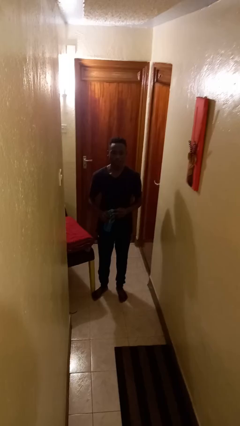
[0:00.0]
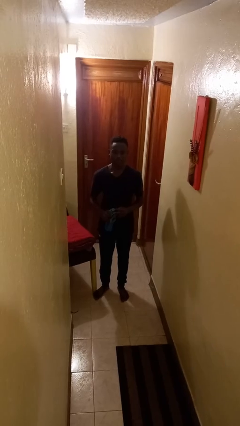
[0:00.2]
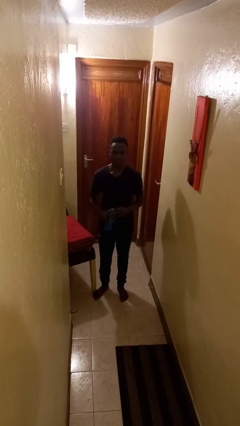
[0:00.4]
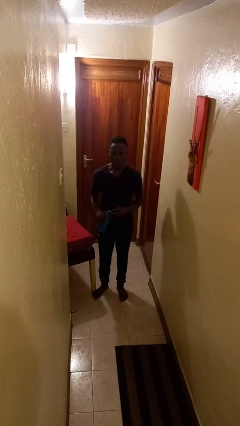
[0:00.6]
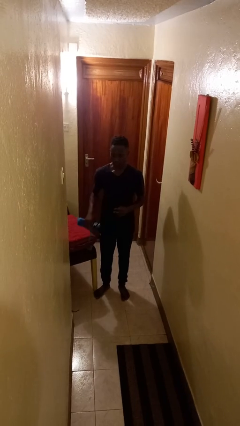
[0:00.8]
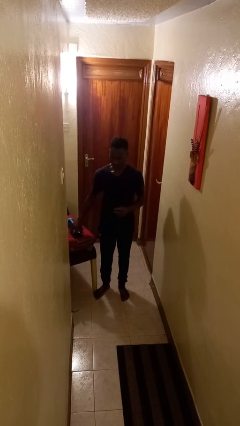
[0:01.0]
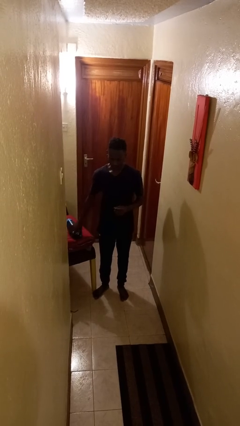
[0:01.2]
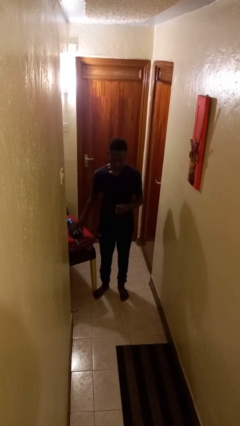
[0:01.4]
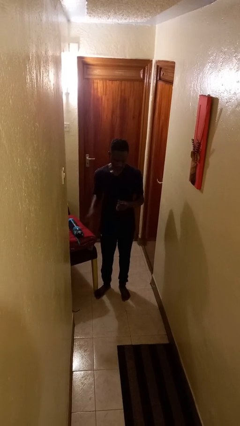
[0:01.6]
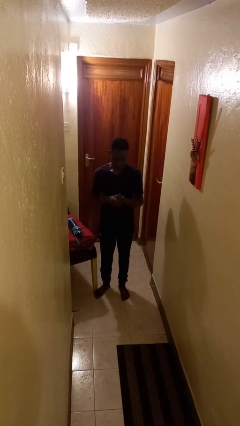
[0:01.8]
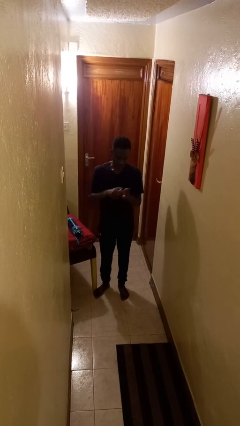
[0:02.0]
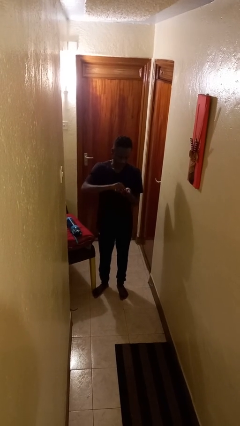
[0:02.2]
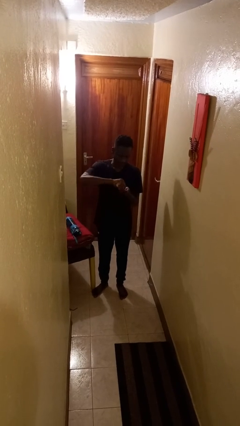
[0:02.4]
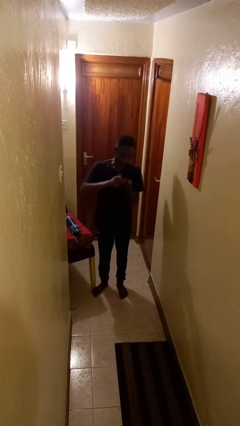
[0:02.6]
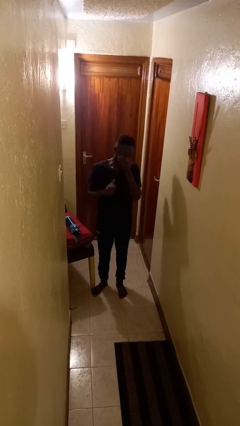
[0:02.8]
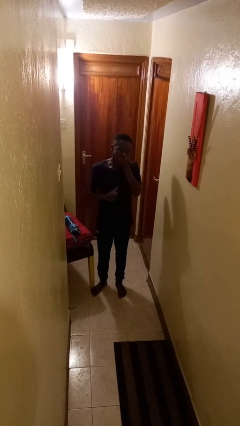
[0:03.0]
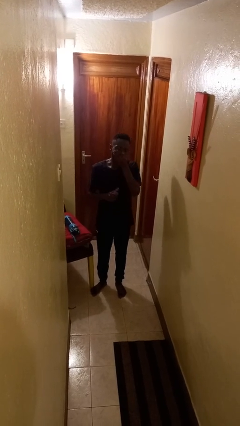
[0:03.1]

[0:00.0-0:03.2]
person takes medicine pills

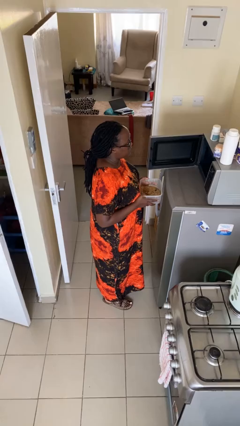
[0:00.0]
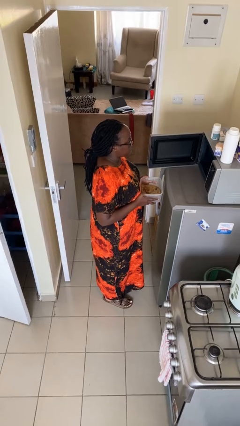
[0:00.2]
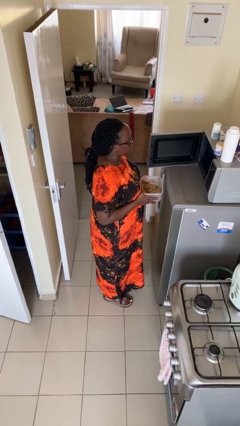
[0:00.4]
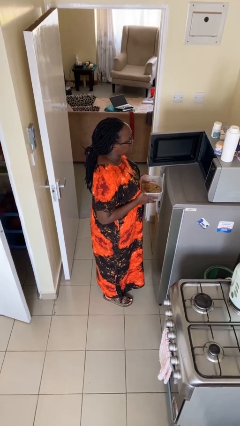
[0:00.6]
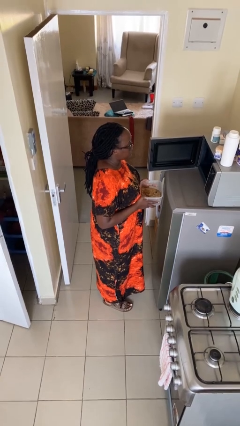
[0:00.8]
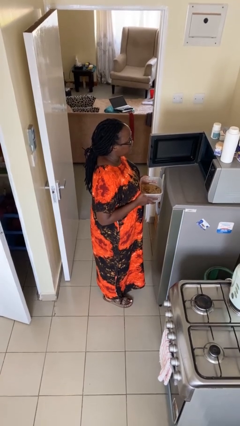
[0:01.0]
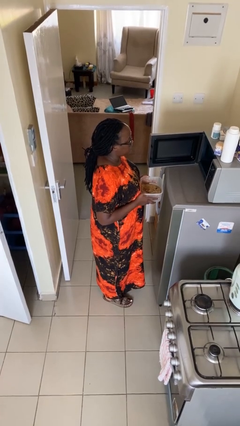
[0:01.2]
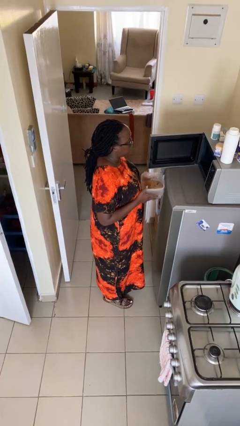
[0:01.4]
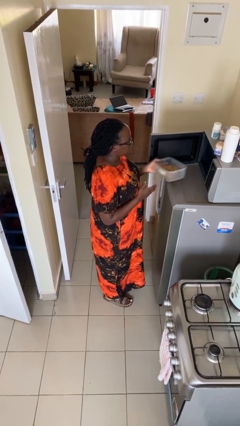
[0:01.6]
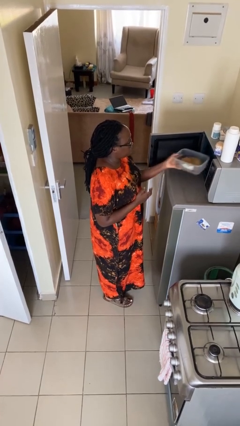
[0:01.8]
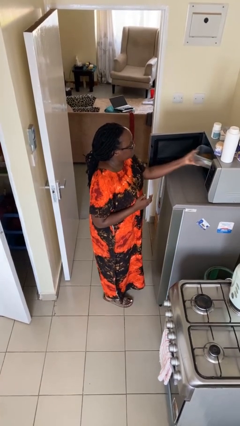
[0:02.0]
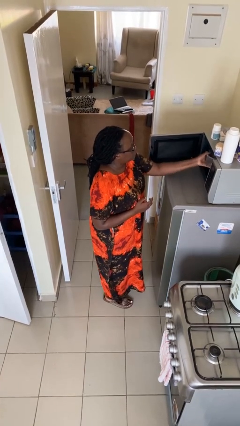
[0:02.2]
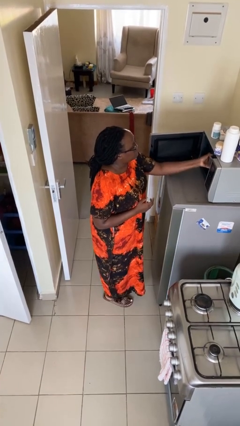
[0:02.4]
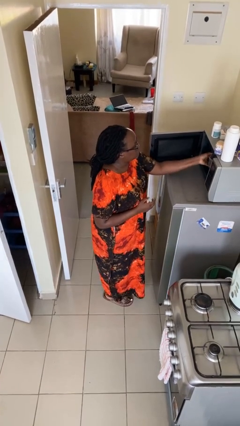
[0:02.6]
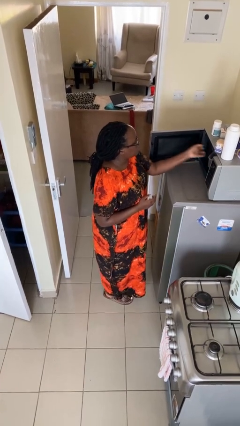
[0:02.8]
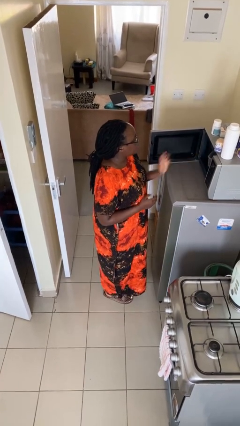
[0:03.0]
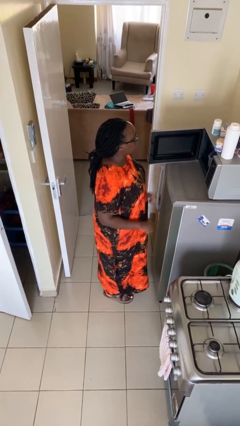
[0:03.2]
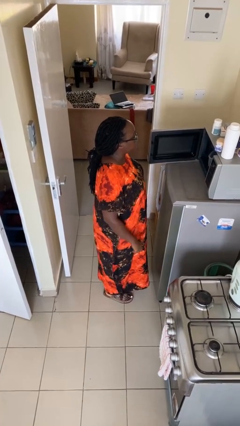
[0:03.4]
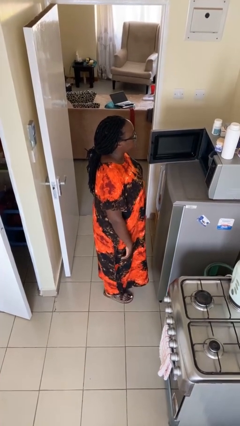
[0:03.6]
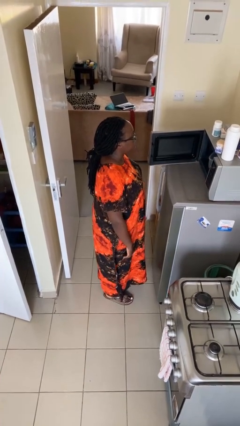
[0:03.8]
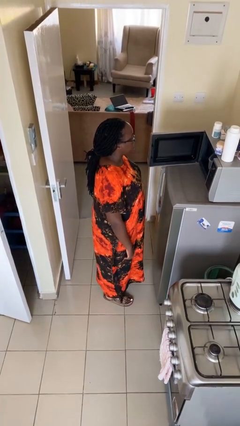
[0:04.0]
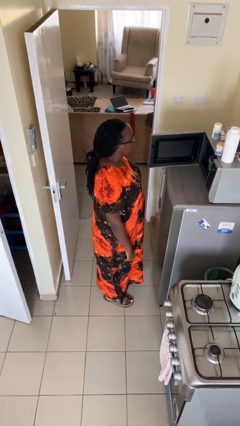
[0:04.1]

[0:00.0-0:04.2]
person puts object into microwave

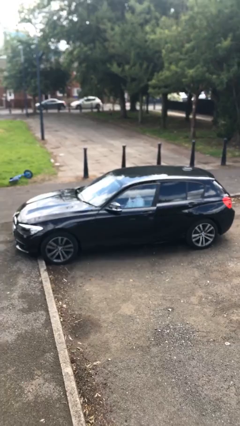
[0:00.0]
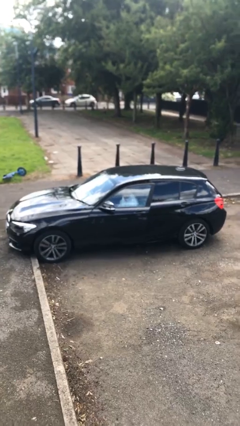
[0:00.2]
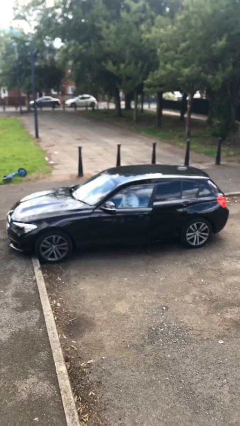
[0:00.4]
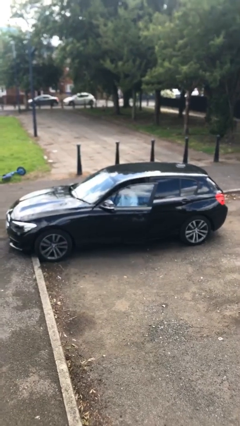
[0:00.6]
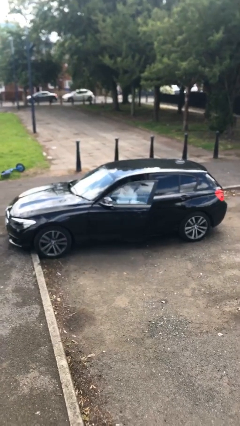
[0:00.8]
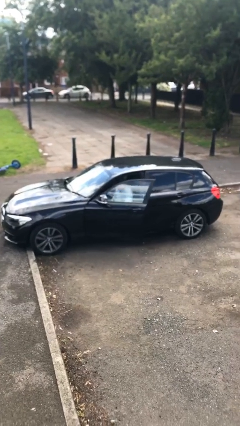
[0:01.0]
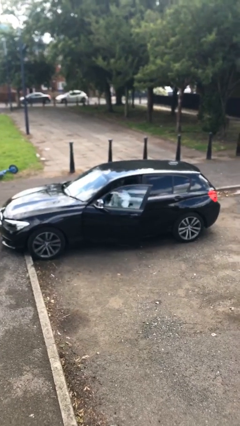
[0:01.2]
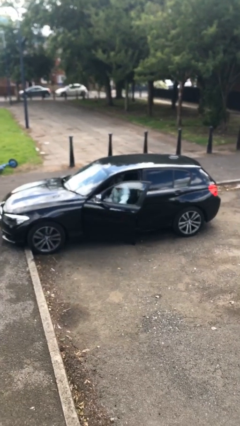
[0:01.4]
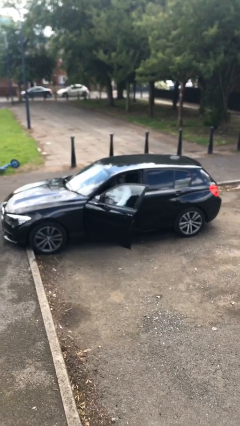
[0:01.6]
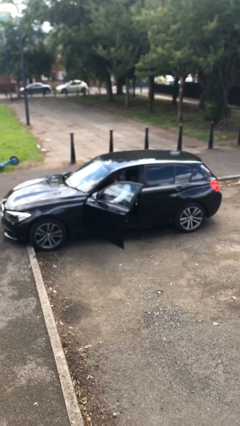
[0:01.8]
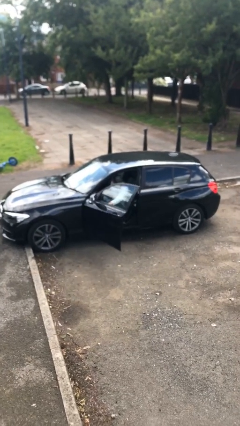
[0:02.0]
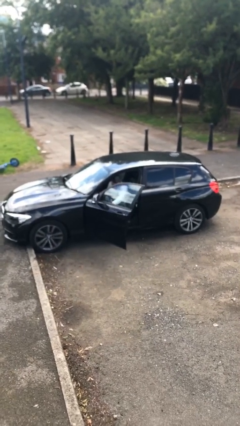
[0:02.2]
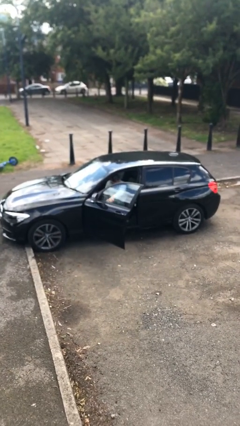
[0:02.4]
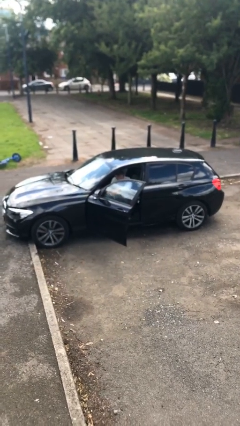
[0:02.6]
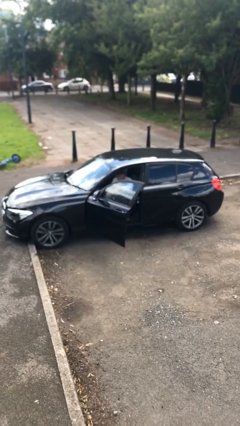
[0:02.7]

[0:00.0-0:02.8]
person opens car door

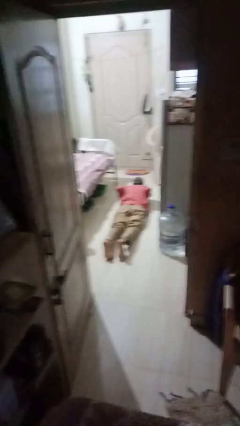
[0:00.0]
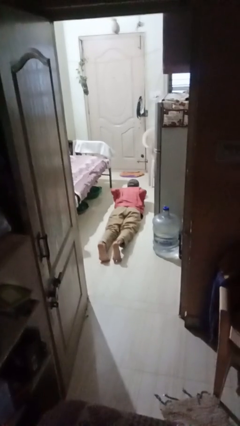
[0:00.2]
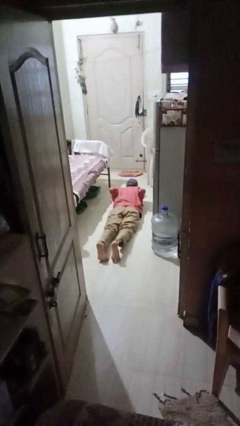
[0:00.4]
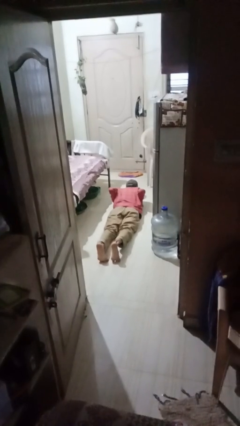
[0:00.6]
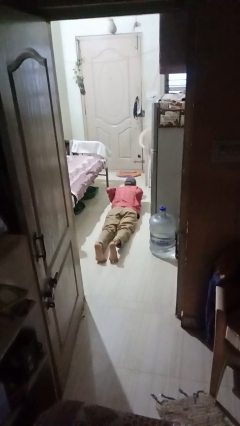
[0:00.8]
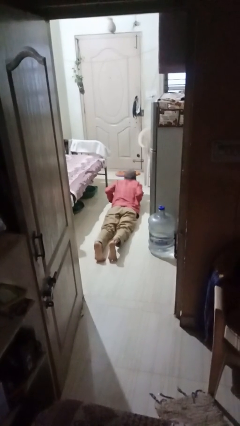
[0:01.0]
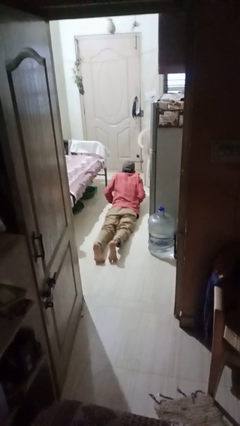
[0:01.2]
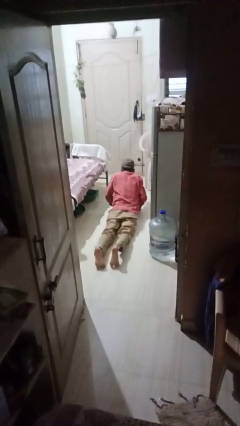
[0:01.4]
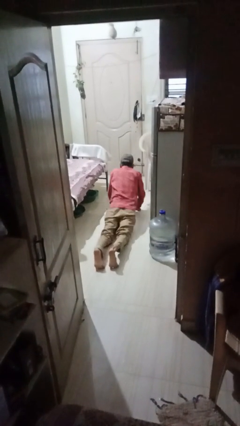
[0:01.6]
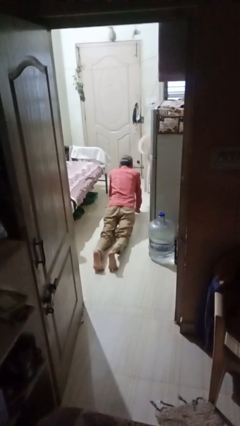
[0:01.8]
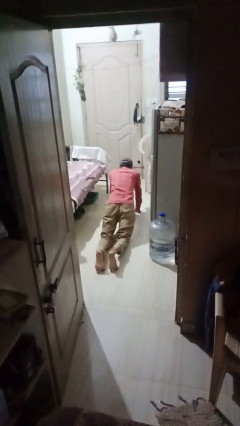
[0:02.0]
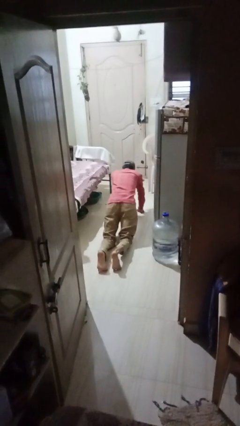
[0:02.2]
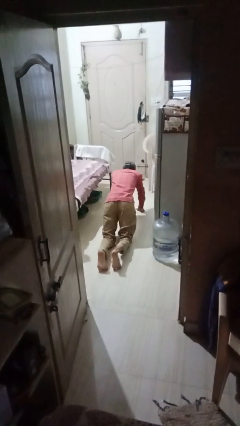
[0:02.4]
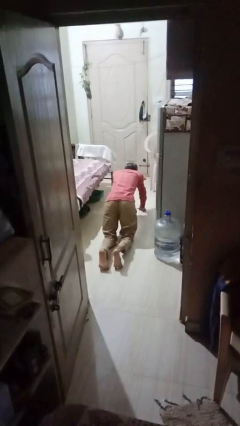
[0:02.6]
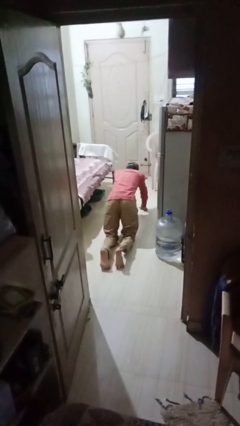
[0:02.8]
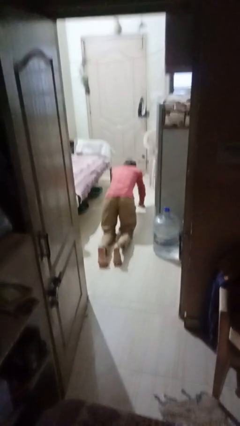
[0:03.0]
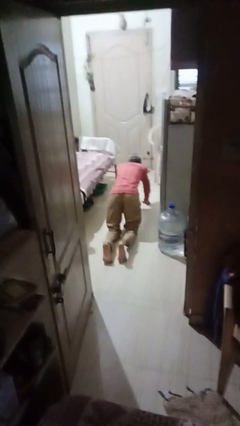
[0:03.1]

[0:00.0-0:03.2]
person exercises with pushup

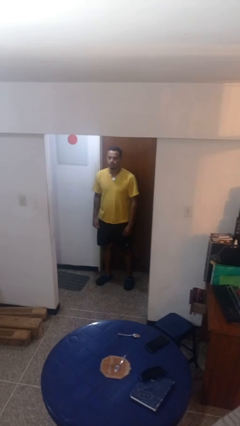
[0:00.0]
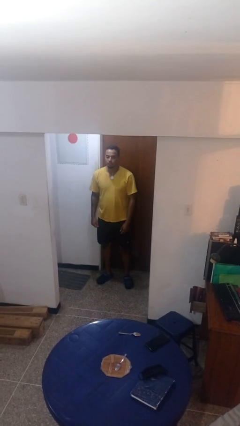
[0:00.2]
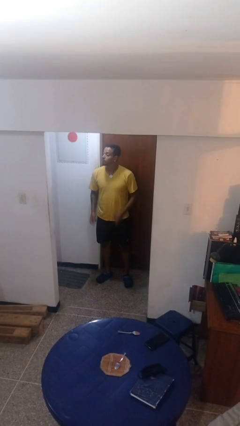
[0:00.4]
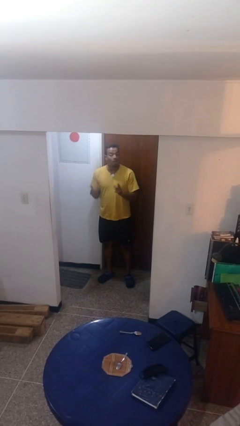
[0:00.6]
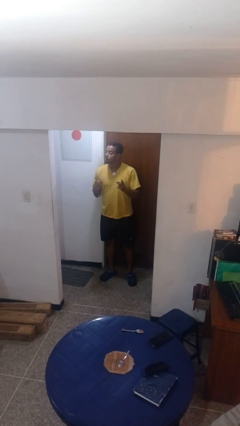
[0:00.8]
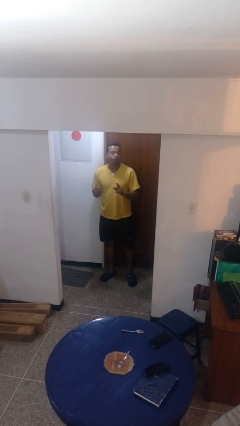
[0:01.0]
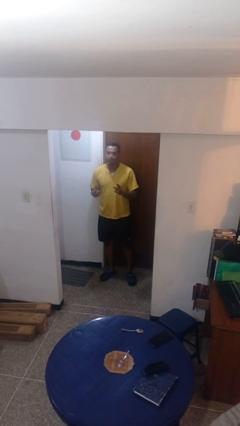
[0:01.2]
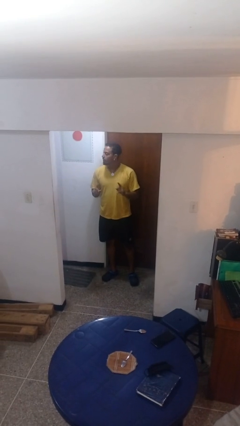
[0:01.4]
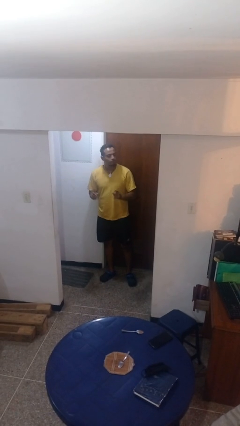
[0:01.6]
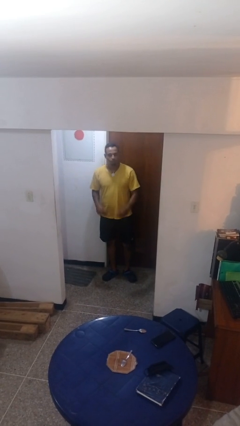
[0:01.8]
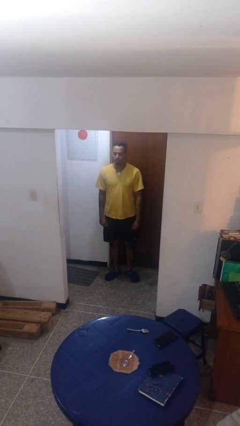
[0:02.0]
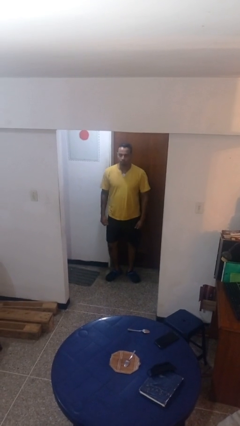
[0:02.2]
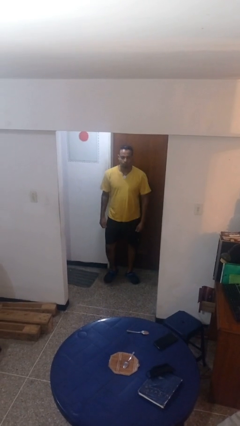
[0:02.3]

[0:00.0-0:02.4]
person shakes head

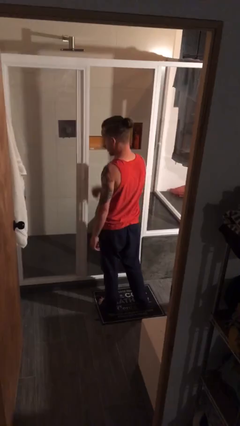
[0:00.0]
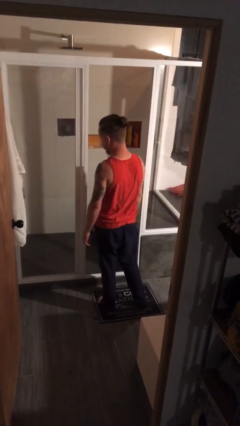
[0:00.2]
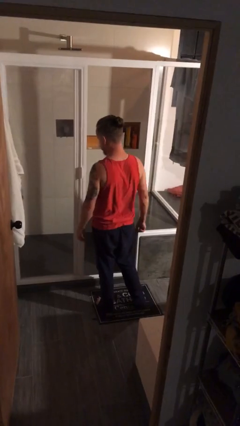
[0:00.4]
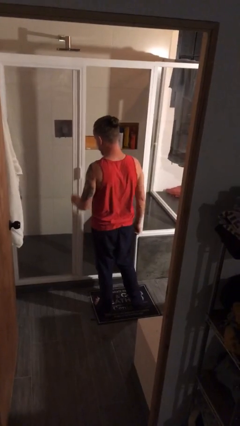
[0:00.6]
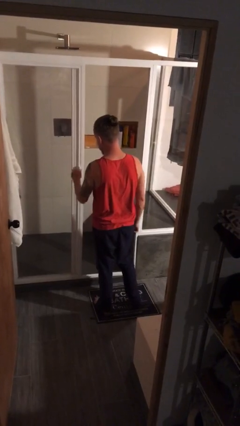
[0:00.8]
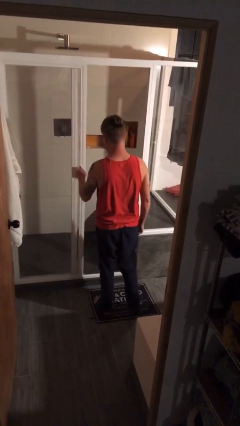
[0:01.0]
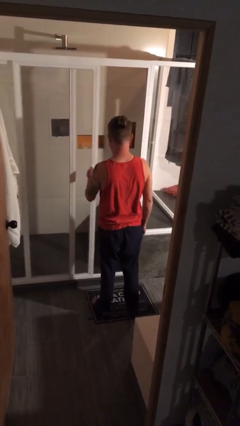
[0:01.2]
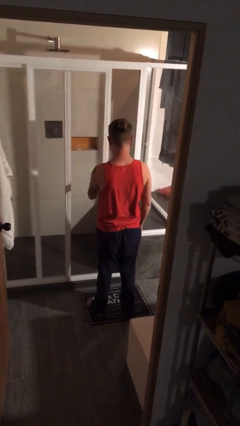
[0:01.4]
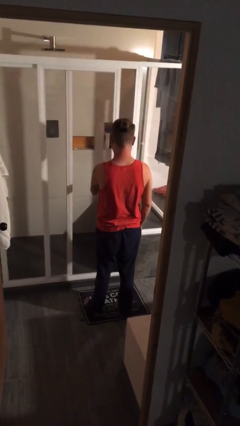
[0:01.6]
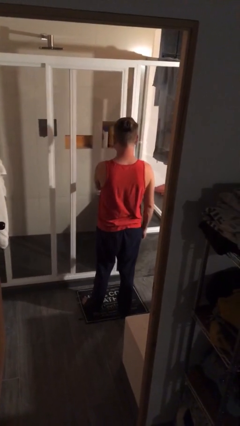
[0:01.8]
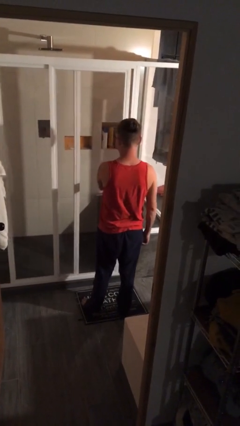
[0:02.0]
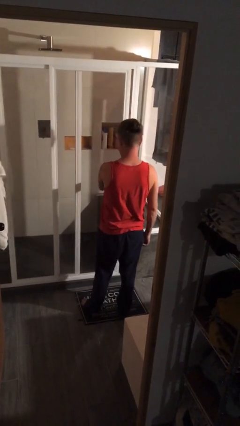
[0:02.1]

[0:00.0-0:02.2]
person closes sliding door
